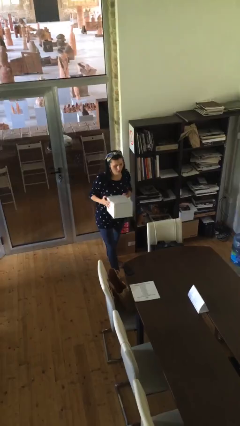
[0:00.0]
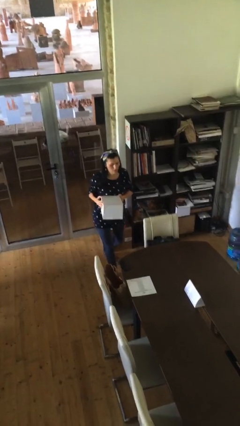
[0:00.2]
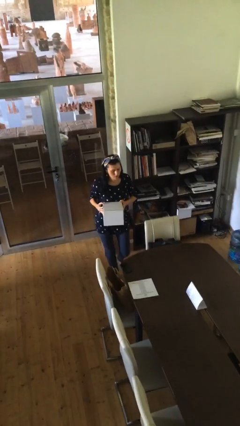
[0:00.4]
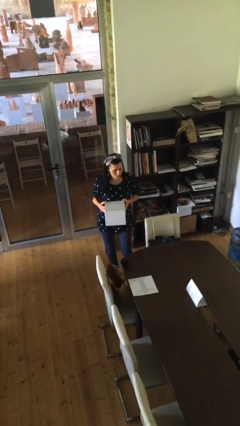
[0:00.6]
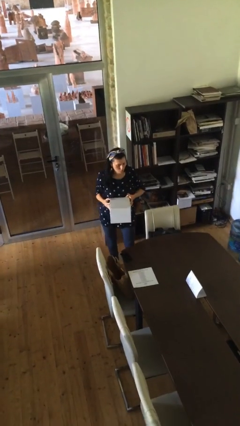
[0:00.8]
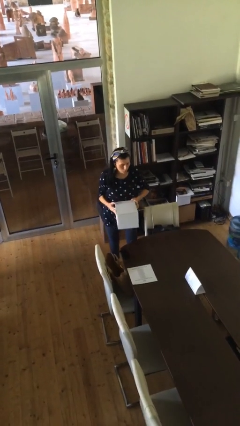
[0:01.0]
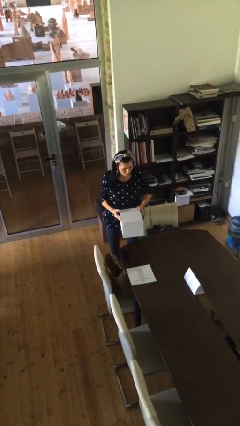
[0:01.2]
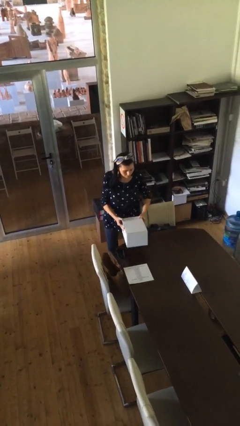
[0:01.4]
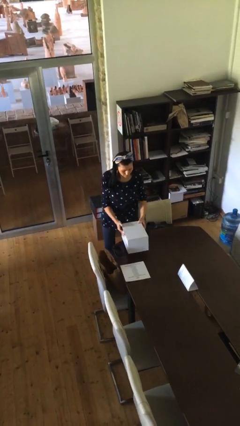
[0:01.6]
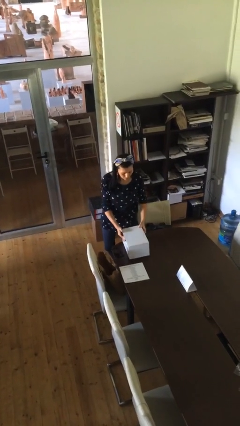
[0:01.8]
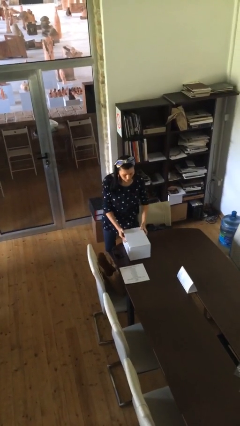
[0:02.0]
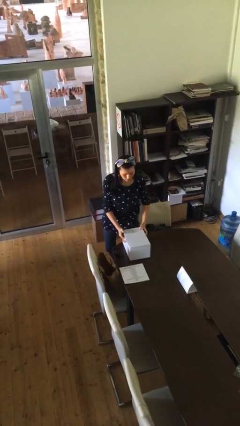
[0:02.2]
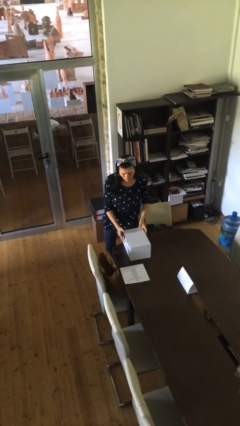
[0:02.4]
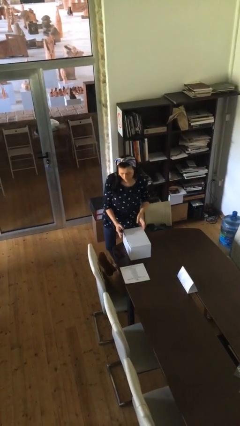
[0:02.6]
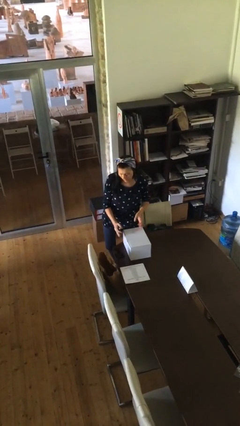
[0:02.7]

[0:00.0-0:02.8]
person puts down object on table

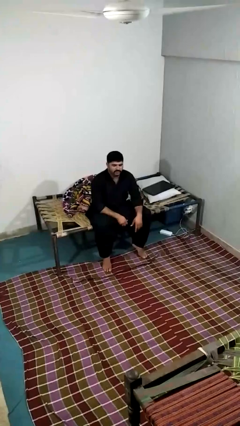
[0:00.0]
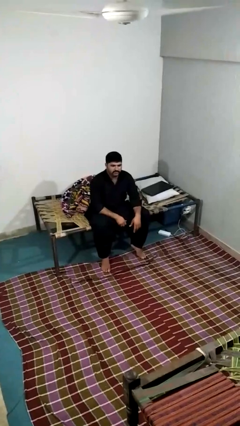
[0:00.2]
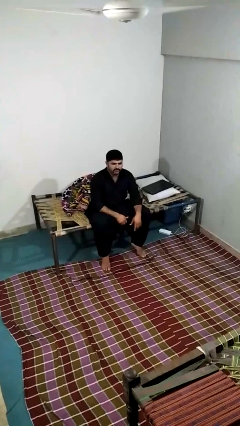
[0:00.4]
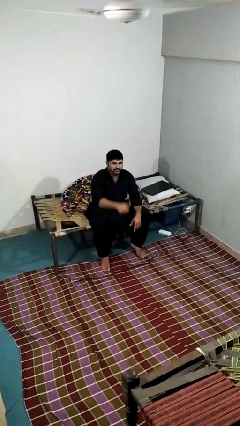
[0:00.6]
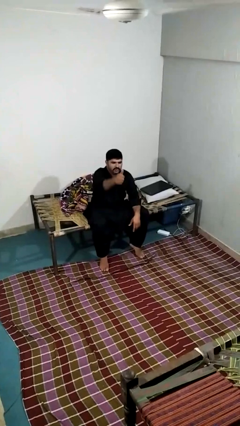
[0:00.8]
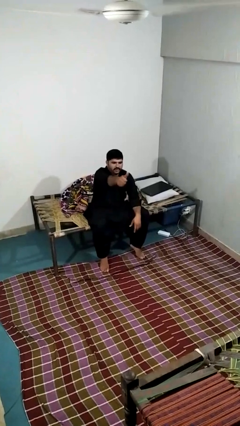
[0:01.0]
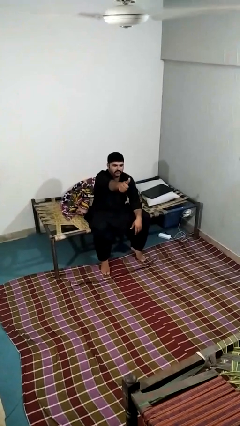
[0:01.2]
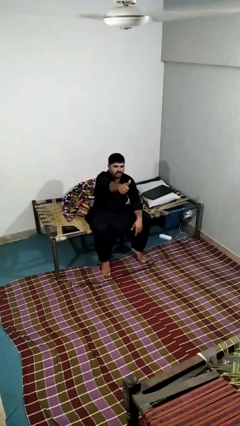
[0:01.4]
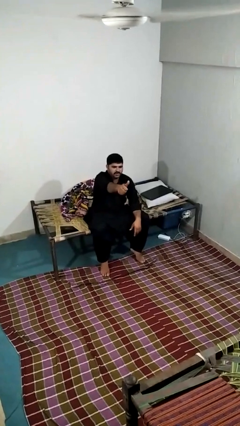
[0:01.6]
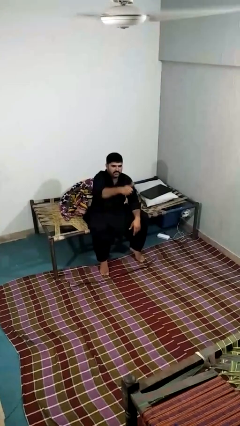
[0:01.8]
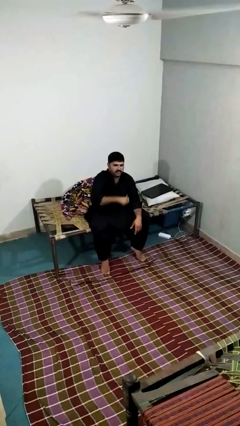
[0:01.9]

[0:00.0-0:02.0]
person gestures thumbs up

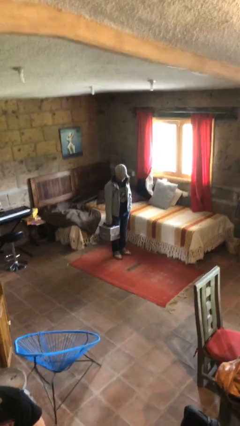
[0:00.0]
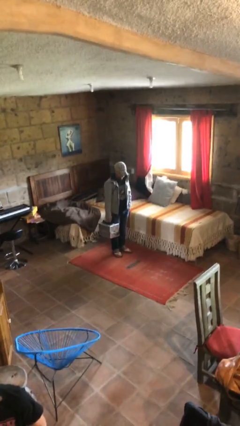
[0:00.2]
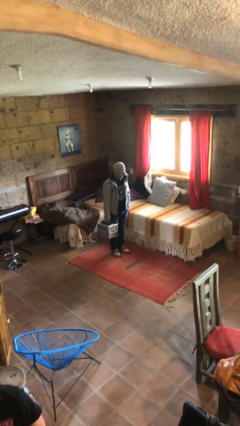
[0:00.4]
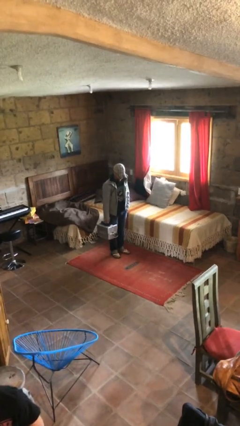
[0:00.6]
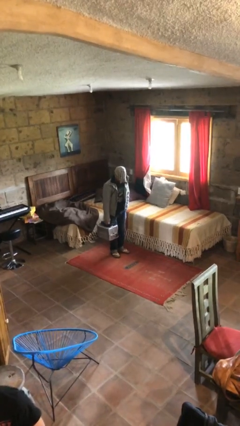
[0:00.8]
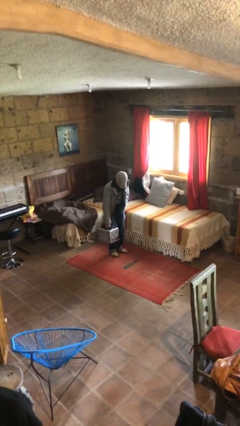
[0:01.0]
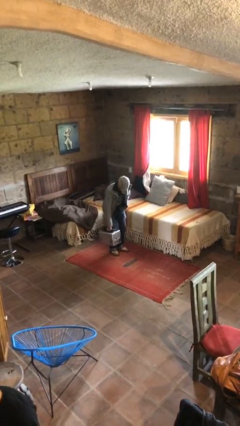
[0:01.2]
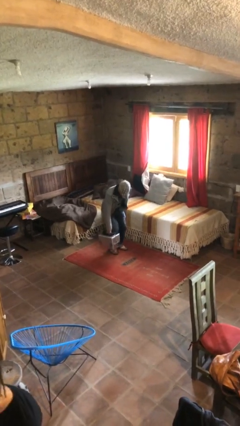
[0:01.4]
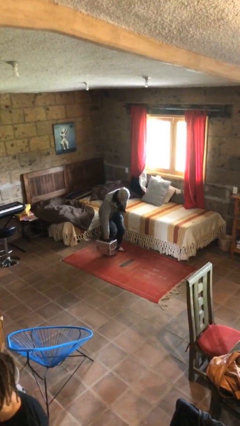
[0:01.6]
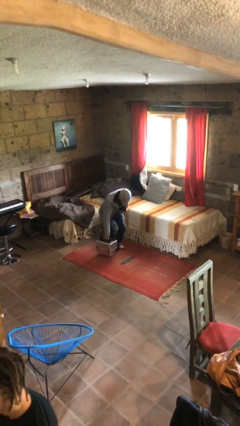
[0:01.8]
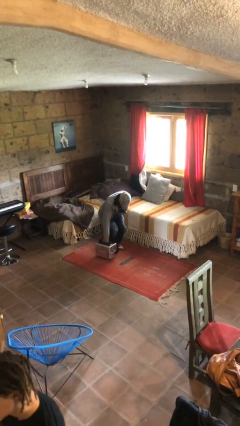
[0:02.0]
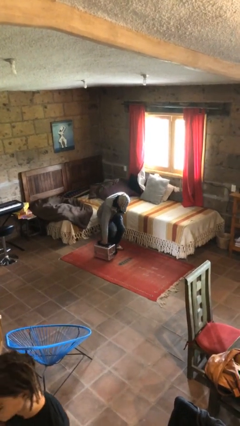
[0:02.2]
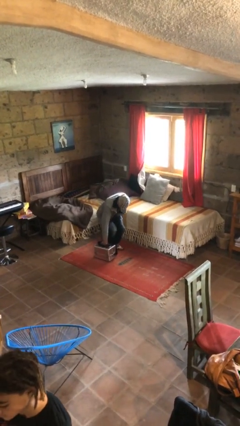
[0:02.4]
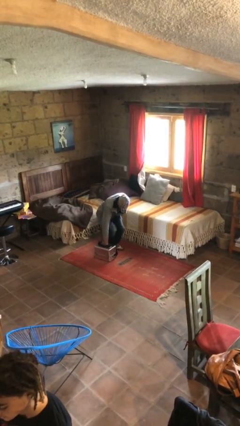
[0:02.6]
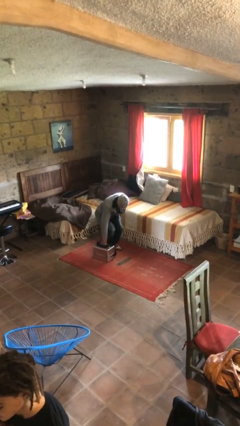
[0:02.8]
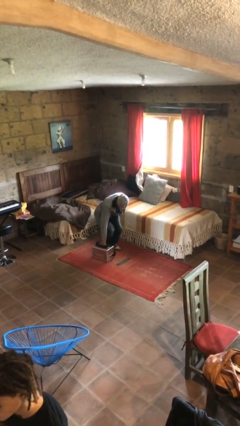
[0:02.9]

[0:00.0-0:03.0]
person puts down object on floor

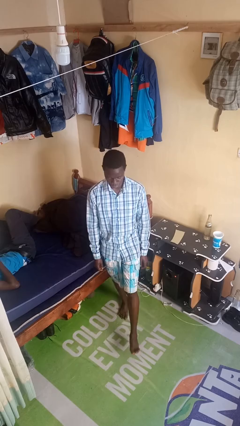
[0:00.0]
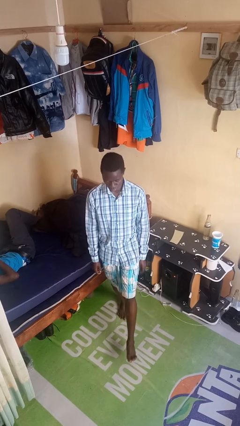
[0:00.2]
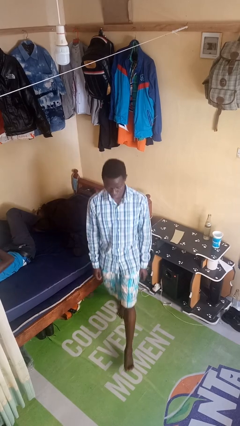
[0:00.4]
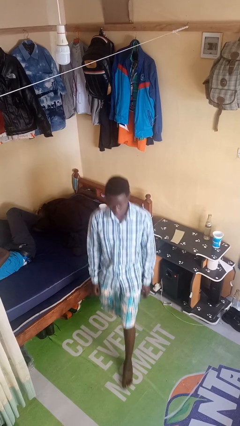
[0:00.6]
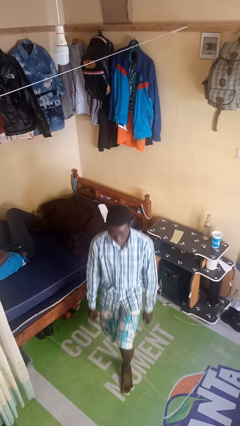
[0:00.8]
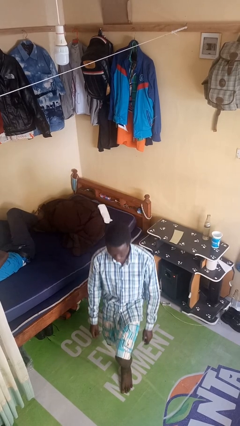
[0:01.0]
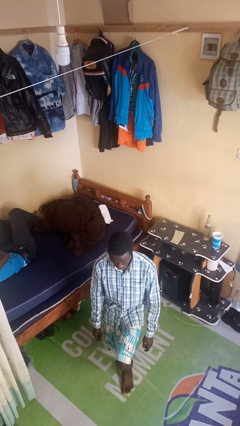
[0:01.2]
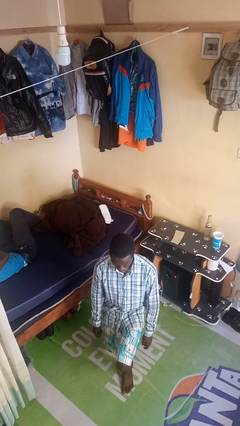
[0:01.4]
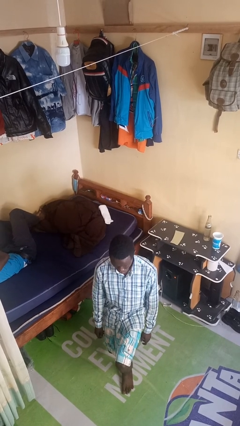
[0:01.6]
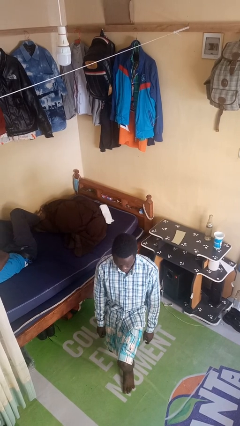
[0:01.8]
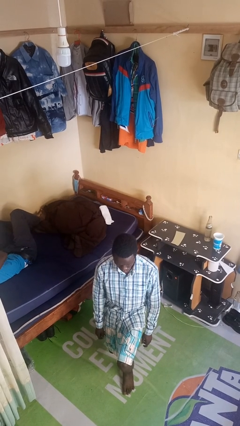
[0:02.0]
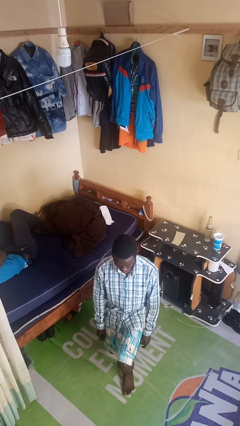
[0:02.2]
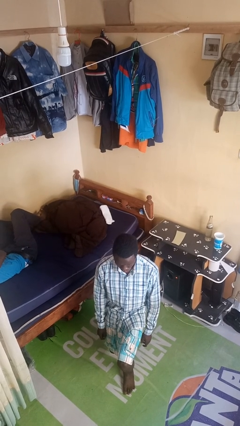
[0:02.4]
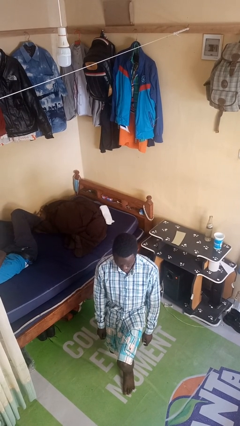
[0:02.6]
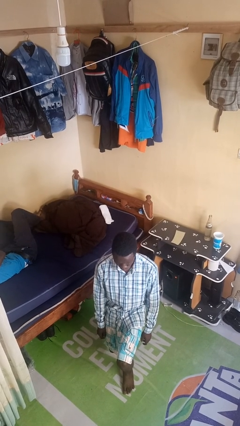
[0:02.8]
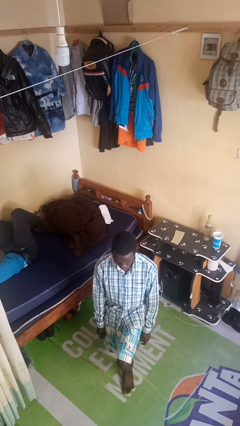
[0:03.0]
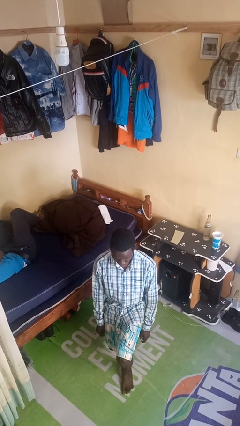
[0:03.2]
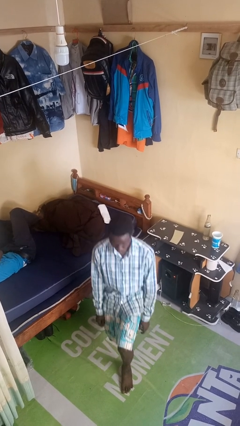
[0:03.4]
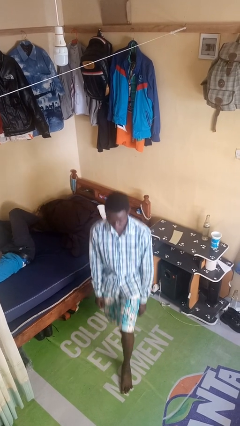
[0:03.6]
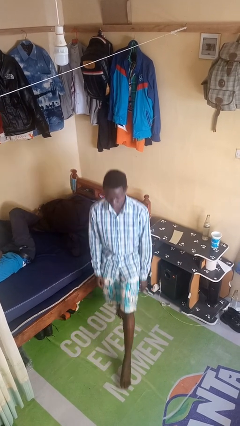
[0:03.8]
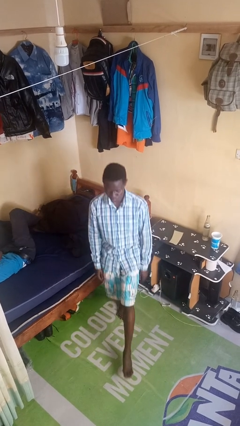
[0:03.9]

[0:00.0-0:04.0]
person exercises with lunges

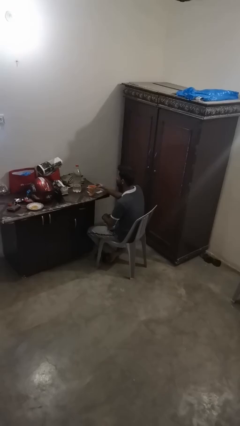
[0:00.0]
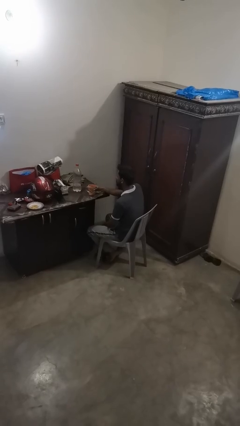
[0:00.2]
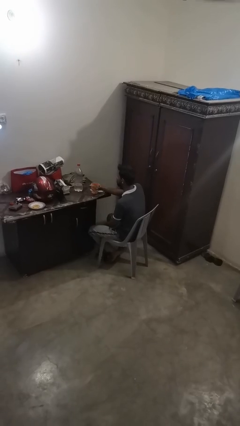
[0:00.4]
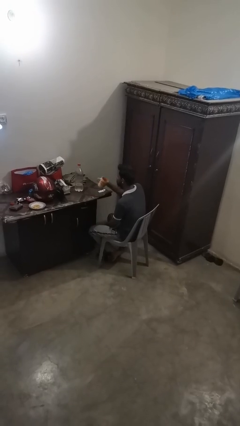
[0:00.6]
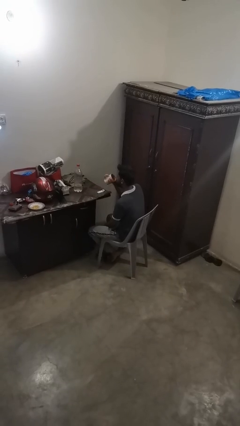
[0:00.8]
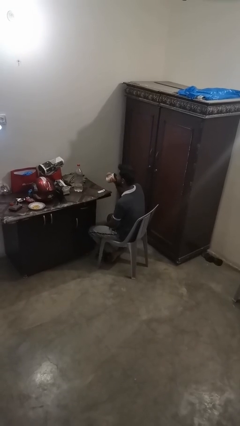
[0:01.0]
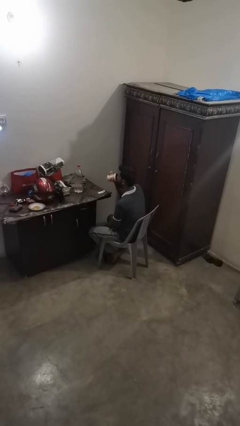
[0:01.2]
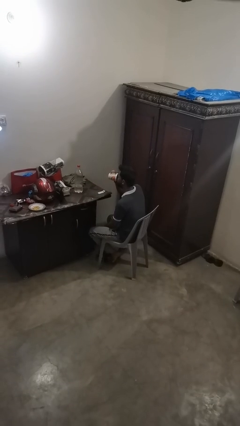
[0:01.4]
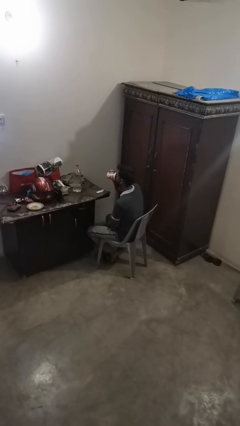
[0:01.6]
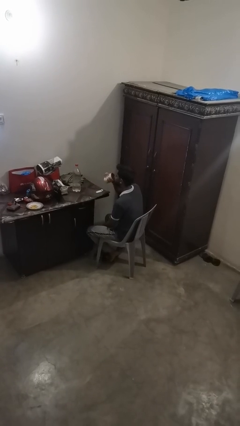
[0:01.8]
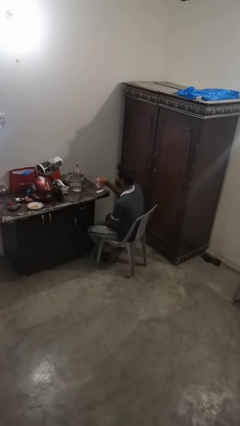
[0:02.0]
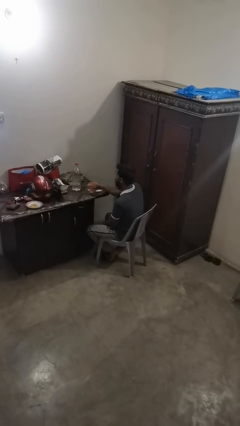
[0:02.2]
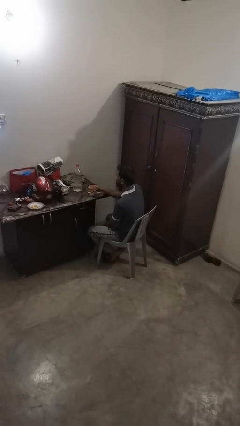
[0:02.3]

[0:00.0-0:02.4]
person drinks from cup

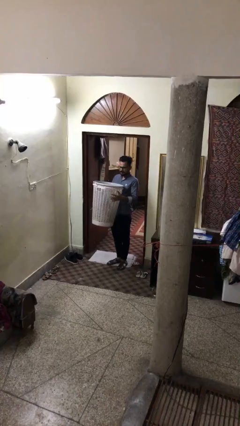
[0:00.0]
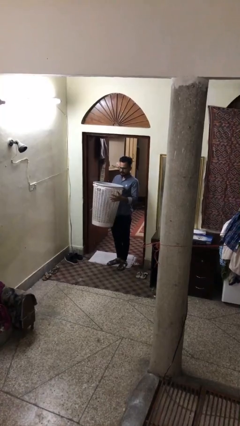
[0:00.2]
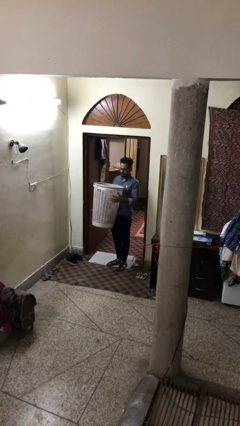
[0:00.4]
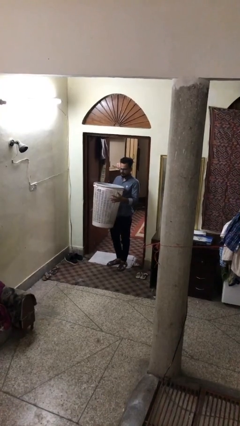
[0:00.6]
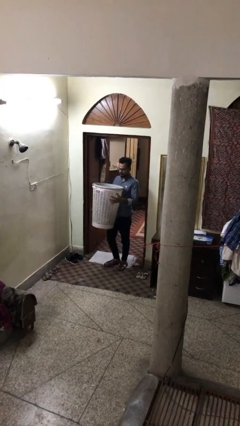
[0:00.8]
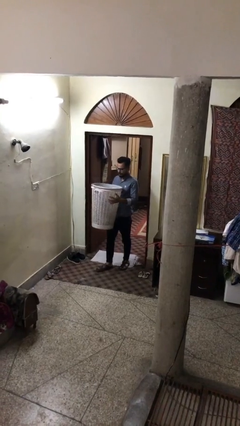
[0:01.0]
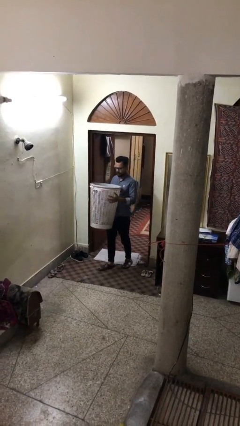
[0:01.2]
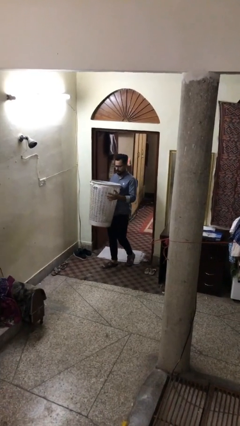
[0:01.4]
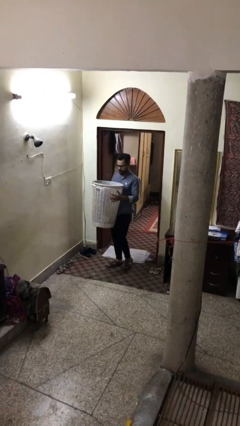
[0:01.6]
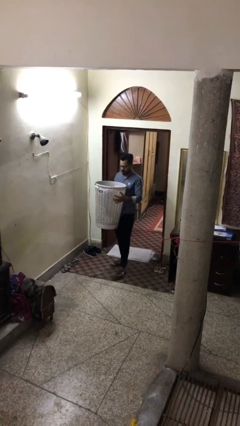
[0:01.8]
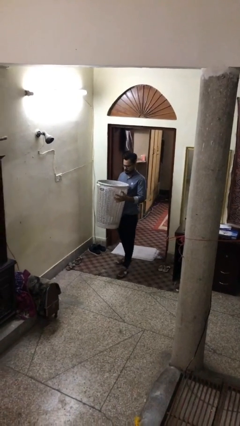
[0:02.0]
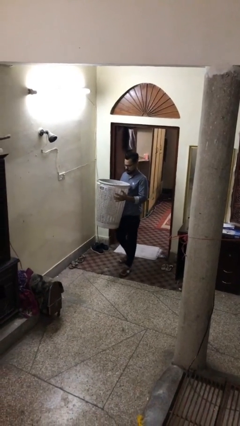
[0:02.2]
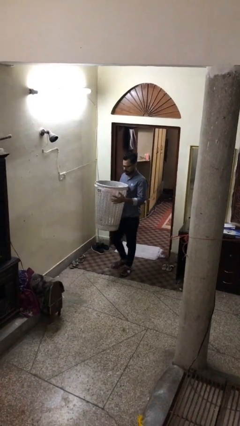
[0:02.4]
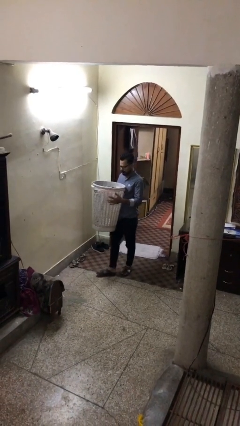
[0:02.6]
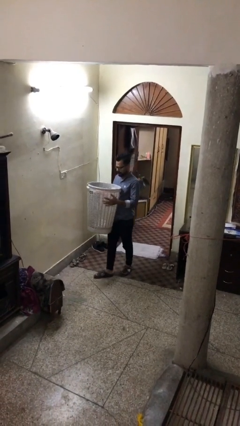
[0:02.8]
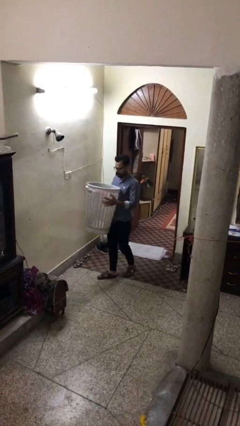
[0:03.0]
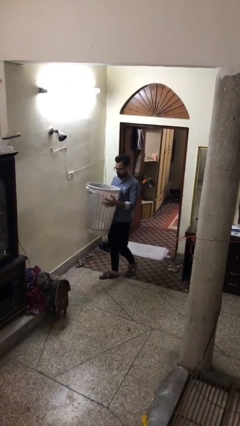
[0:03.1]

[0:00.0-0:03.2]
person carries heavy object
